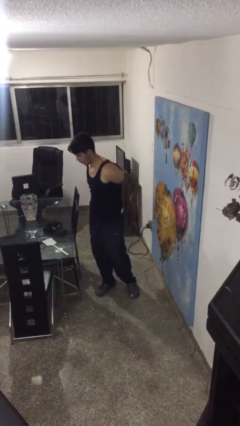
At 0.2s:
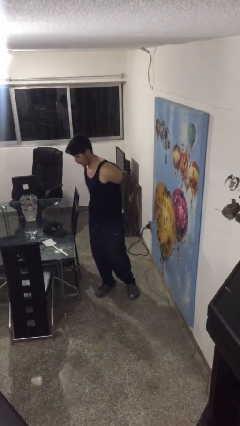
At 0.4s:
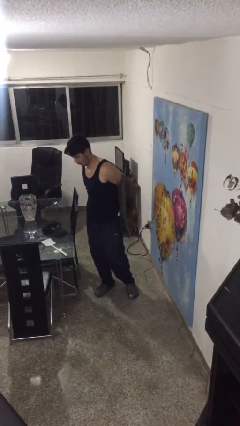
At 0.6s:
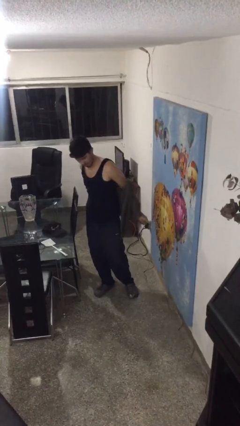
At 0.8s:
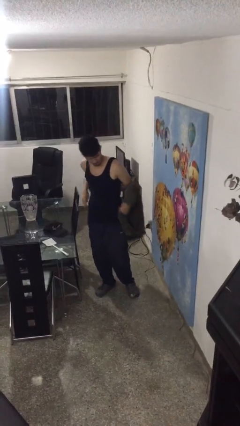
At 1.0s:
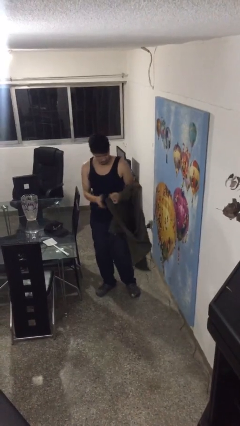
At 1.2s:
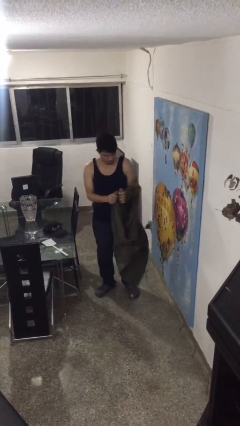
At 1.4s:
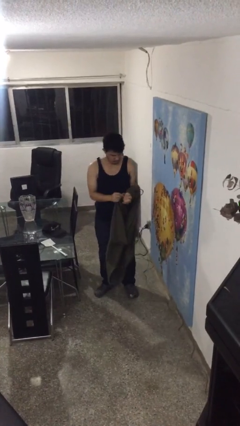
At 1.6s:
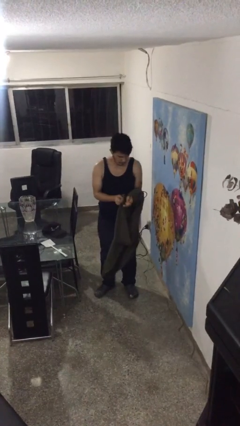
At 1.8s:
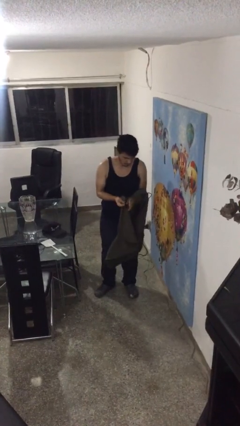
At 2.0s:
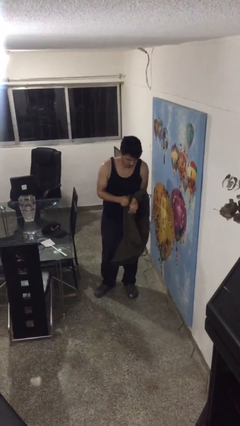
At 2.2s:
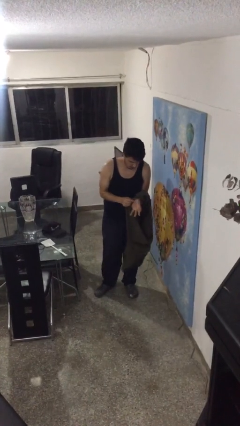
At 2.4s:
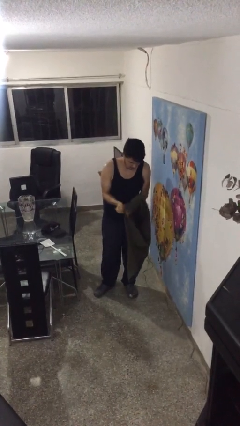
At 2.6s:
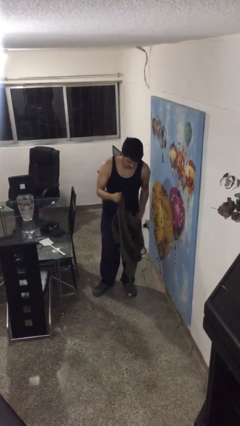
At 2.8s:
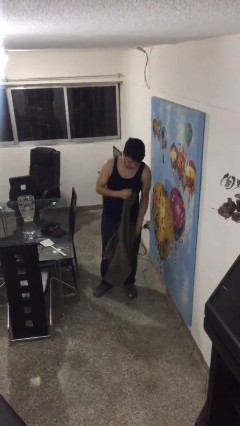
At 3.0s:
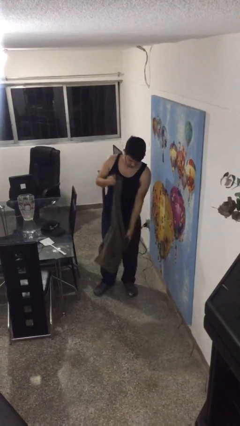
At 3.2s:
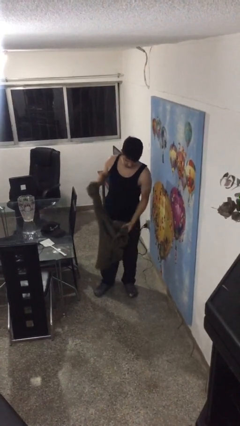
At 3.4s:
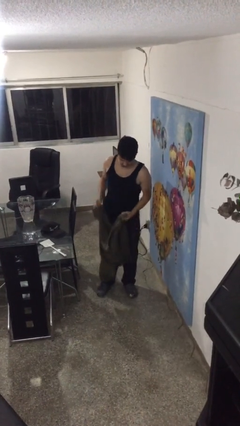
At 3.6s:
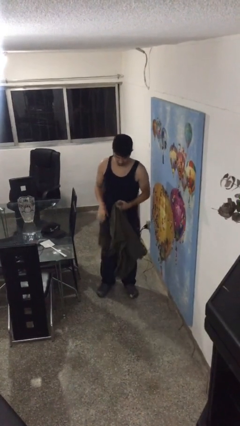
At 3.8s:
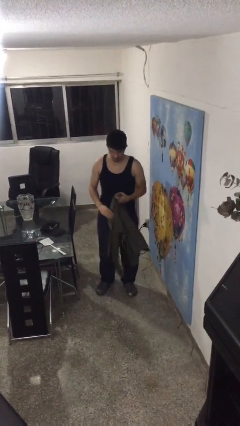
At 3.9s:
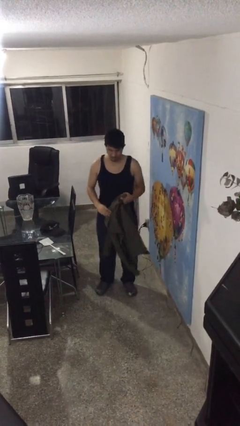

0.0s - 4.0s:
person takes off jacket

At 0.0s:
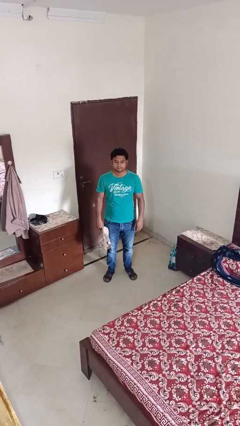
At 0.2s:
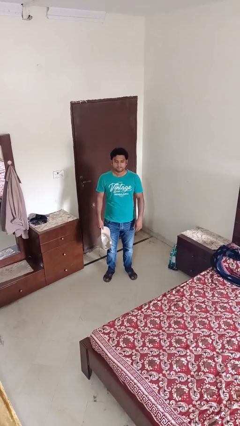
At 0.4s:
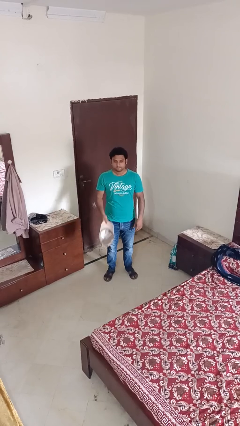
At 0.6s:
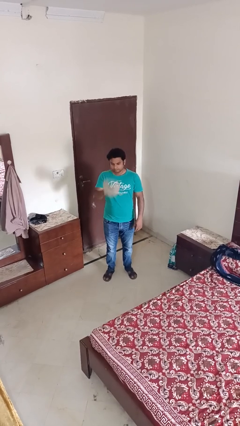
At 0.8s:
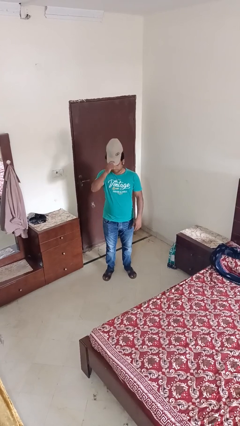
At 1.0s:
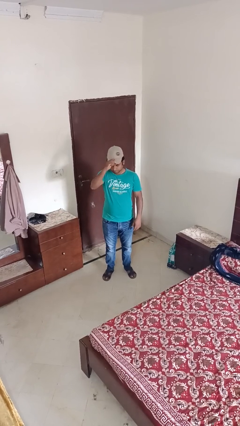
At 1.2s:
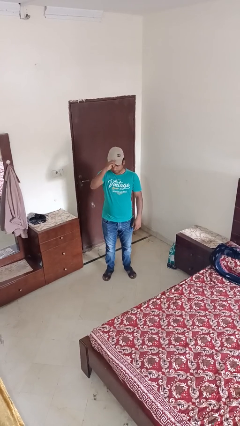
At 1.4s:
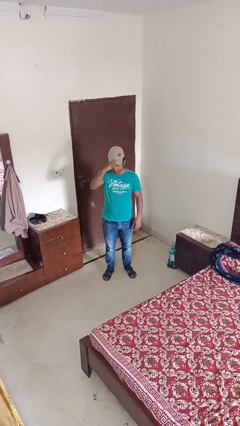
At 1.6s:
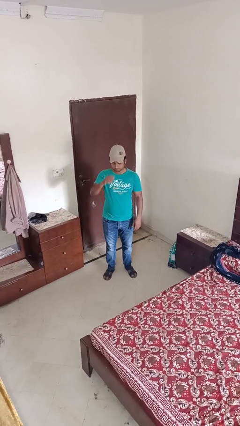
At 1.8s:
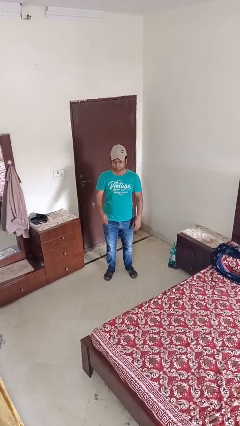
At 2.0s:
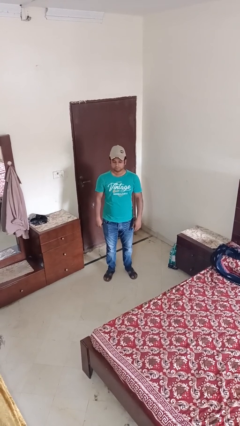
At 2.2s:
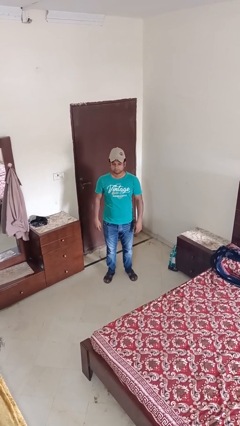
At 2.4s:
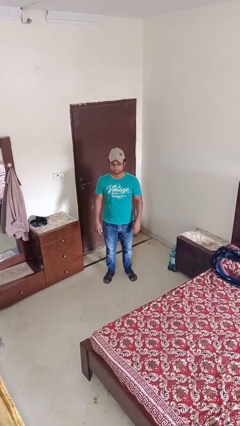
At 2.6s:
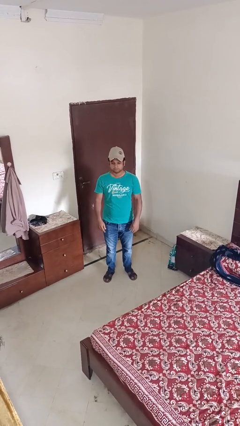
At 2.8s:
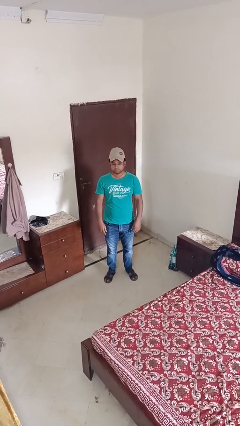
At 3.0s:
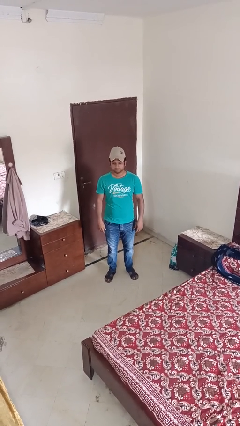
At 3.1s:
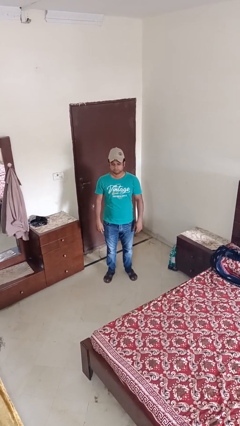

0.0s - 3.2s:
person puts on hat

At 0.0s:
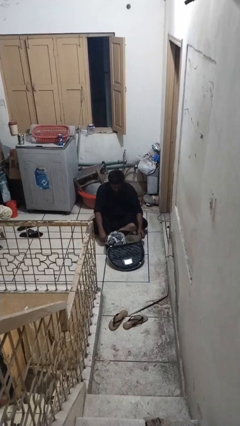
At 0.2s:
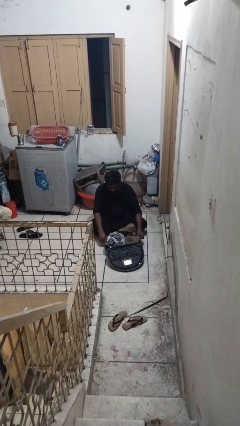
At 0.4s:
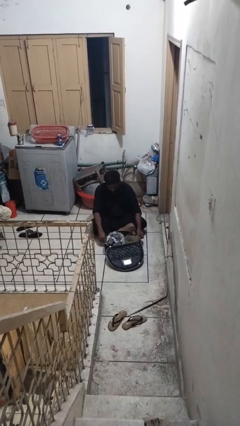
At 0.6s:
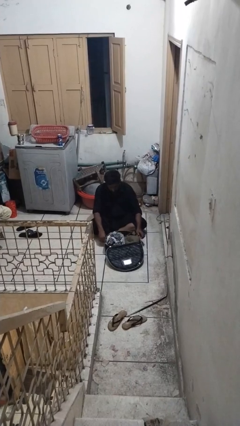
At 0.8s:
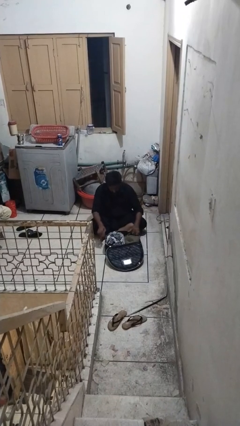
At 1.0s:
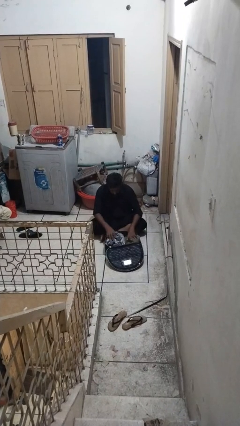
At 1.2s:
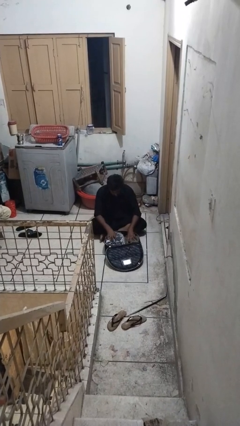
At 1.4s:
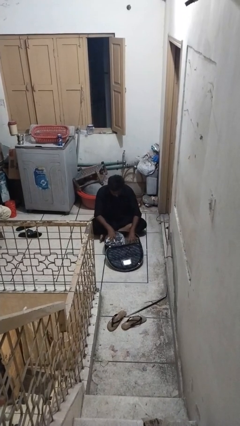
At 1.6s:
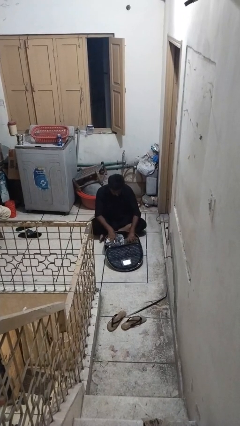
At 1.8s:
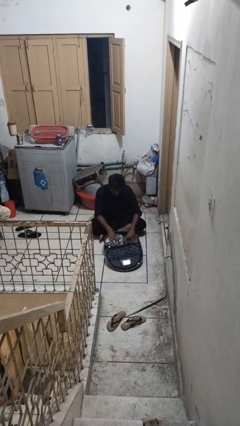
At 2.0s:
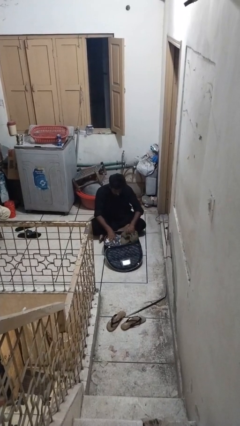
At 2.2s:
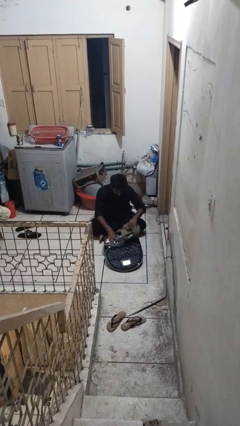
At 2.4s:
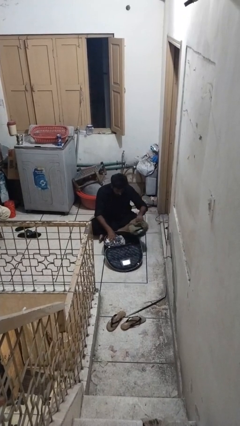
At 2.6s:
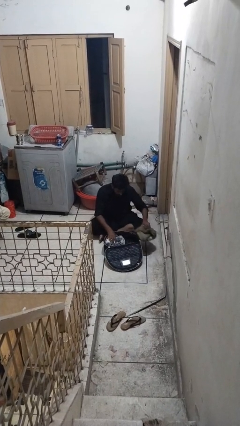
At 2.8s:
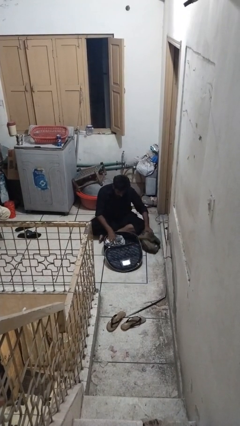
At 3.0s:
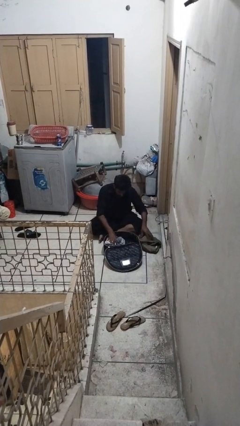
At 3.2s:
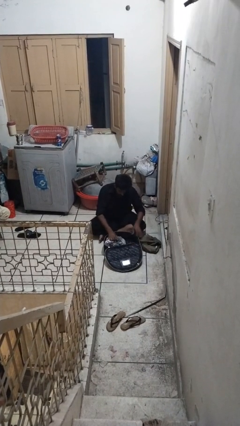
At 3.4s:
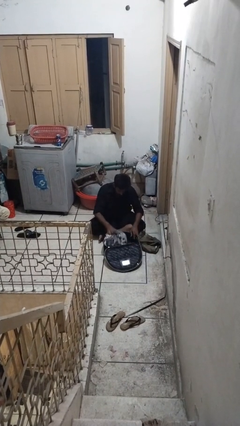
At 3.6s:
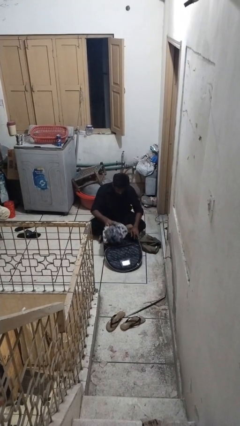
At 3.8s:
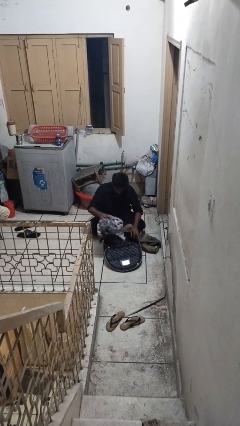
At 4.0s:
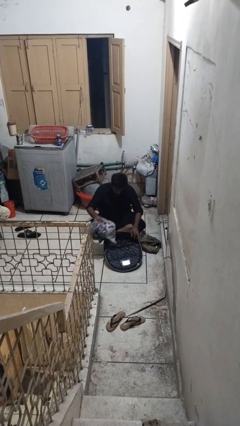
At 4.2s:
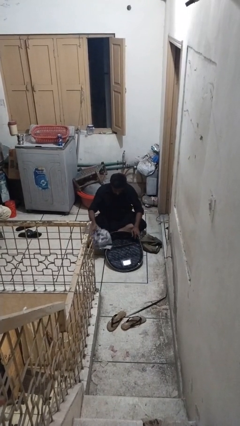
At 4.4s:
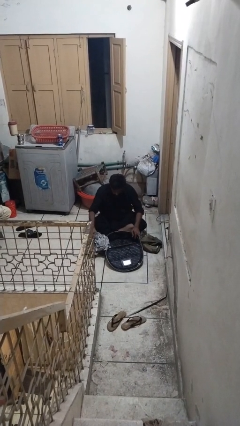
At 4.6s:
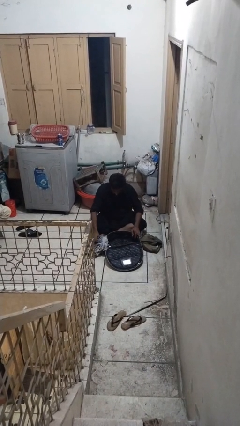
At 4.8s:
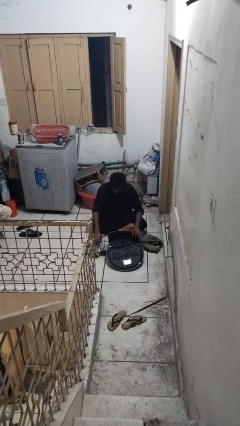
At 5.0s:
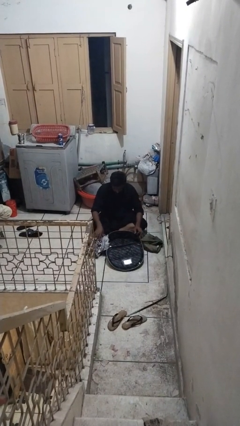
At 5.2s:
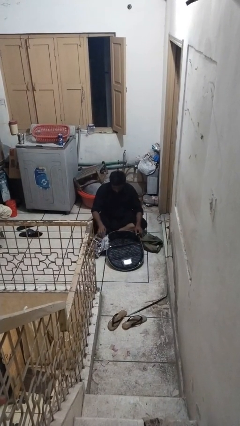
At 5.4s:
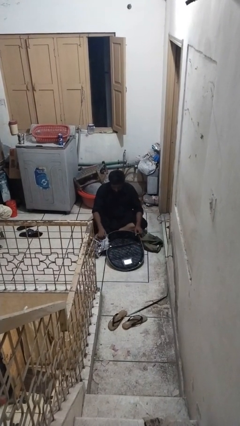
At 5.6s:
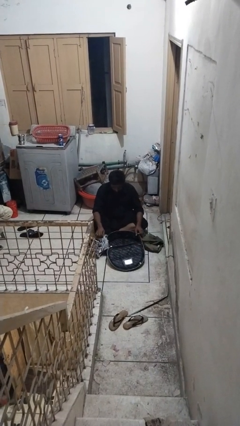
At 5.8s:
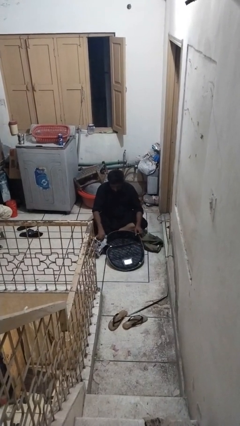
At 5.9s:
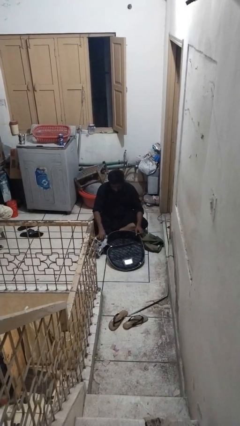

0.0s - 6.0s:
person unloads clothes from suitcase

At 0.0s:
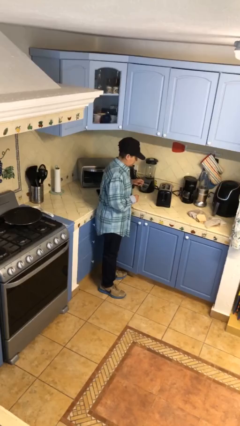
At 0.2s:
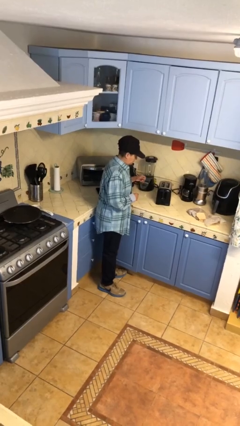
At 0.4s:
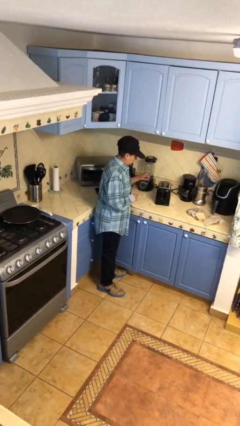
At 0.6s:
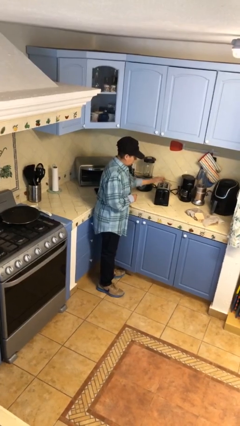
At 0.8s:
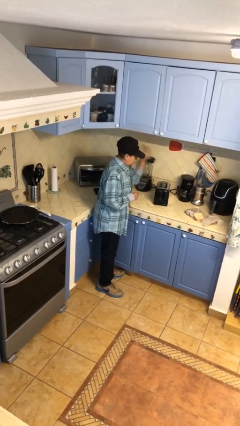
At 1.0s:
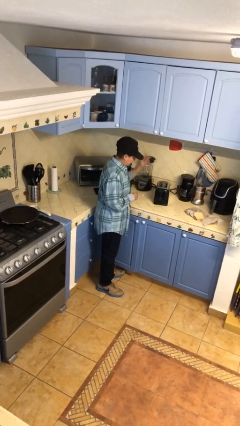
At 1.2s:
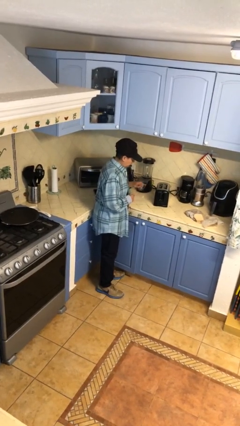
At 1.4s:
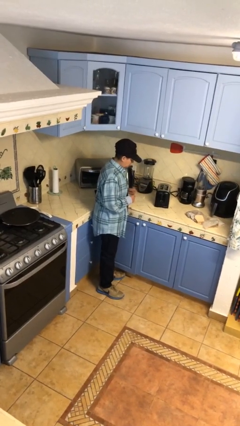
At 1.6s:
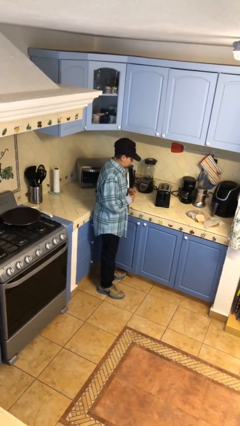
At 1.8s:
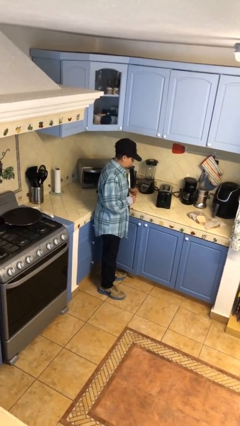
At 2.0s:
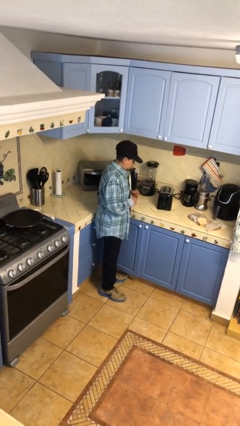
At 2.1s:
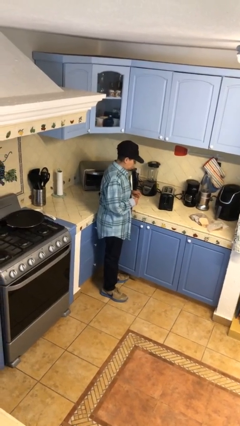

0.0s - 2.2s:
person burns hand

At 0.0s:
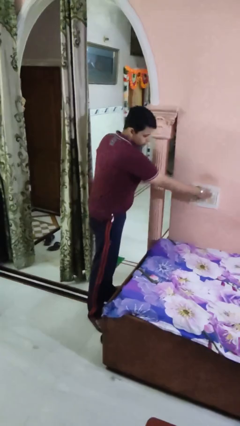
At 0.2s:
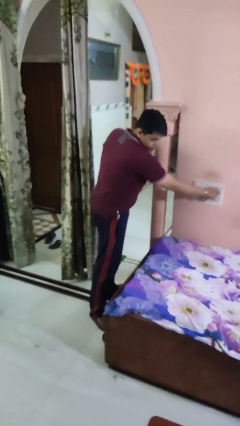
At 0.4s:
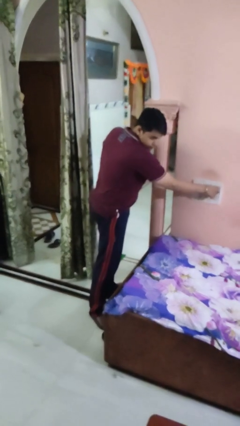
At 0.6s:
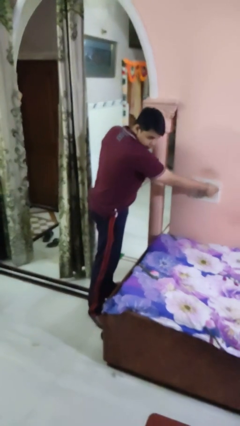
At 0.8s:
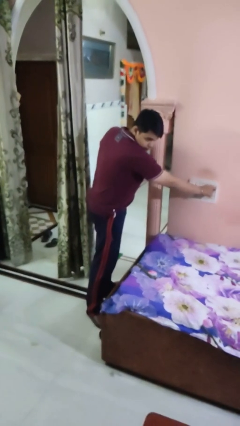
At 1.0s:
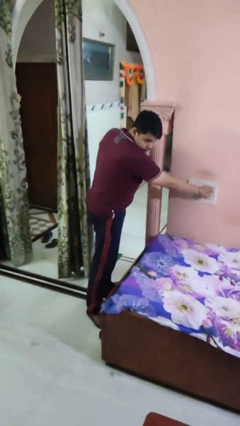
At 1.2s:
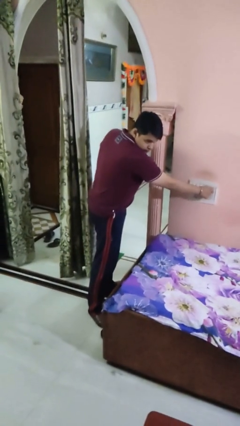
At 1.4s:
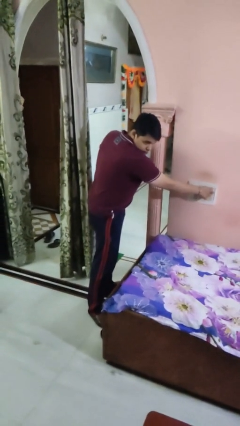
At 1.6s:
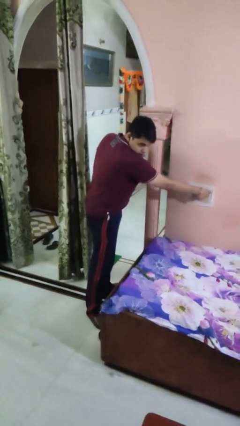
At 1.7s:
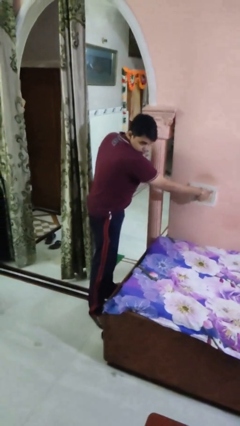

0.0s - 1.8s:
person adjusts thermostat

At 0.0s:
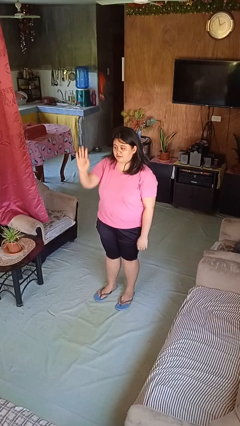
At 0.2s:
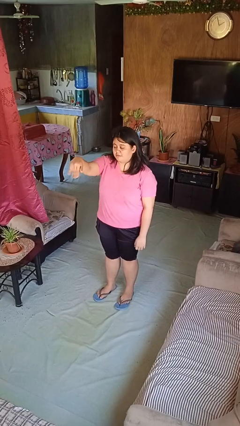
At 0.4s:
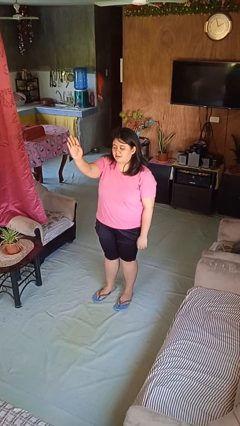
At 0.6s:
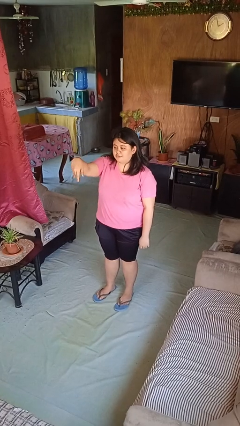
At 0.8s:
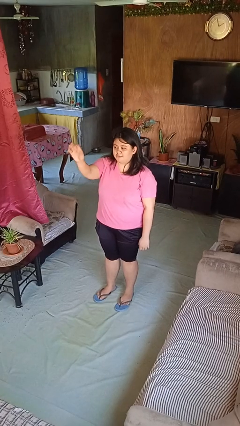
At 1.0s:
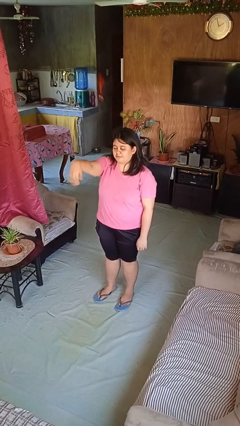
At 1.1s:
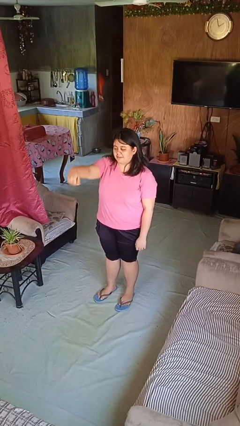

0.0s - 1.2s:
person gestures come here
